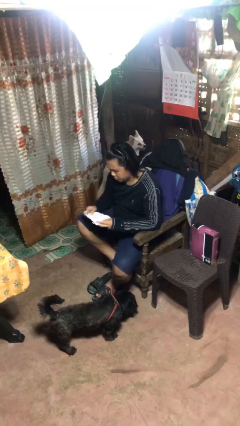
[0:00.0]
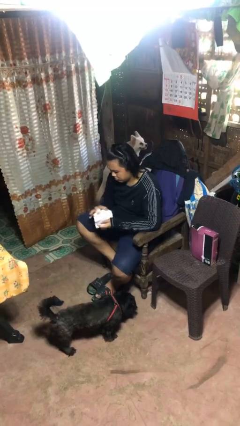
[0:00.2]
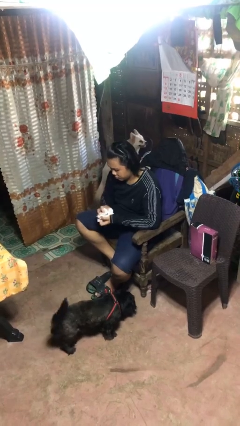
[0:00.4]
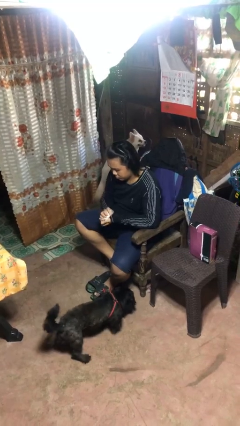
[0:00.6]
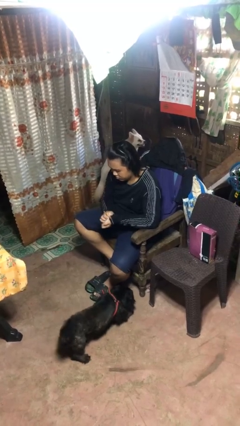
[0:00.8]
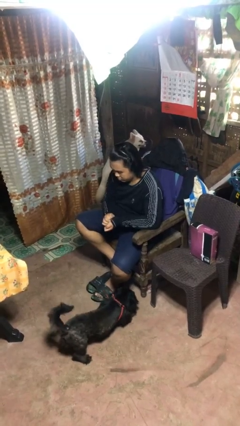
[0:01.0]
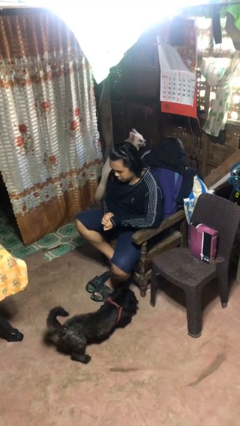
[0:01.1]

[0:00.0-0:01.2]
person crumples paper

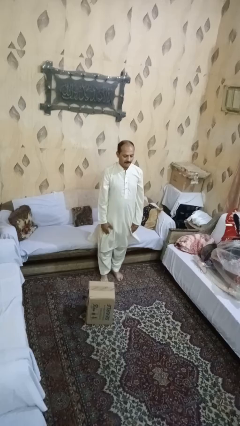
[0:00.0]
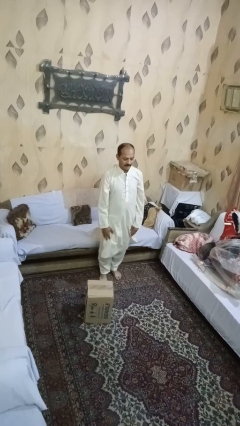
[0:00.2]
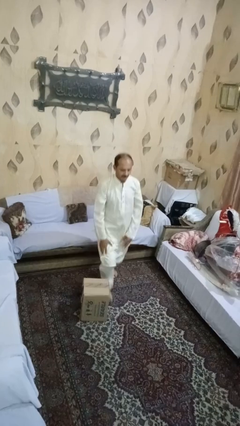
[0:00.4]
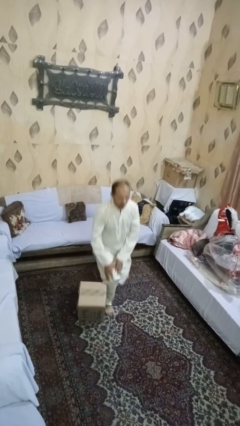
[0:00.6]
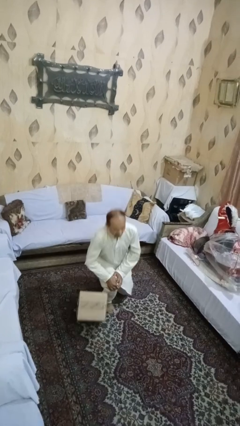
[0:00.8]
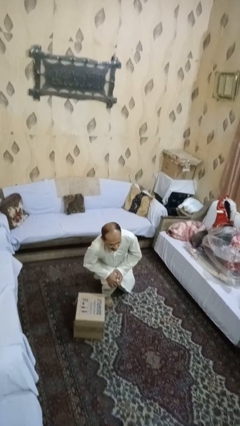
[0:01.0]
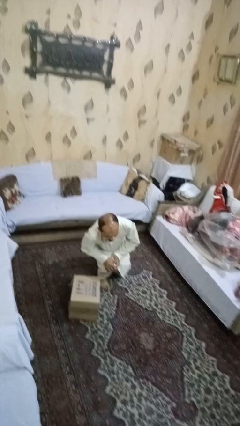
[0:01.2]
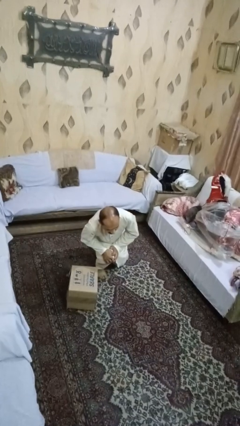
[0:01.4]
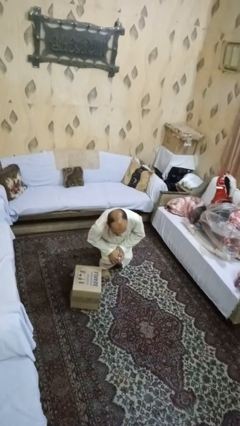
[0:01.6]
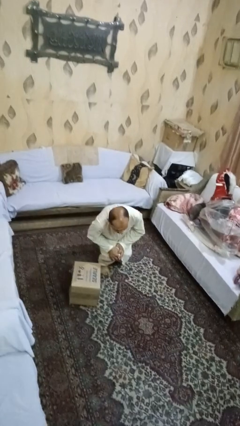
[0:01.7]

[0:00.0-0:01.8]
person trips on object on floor

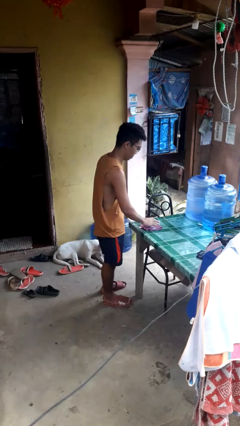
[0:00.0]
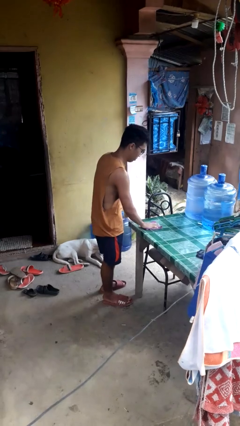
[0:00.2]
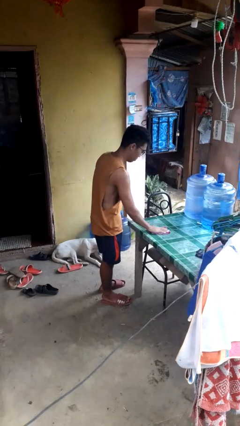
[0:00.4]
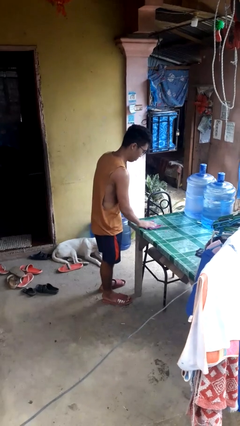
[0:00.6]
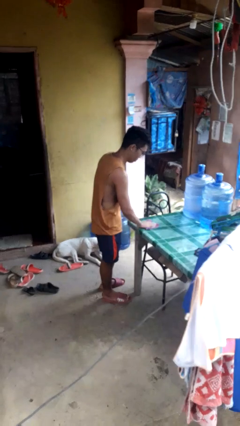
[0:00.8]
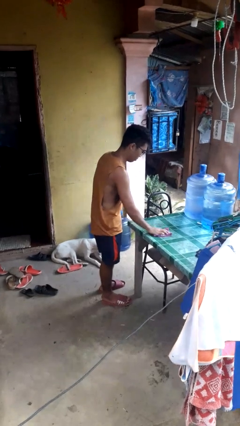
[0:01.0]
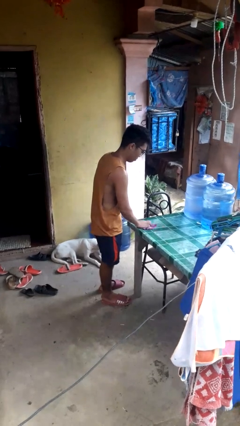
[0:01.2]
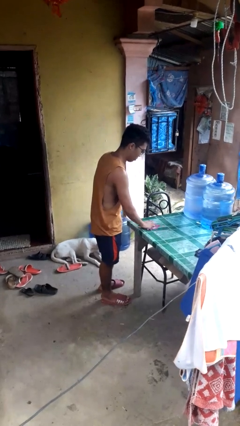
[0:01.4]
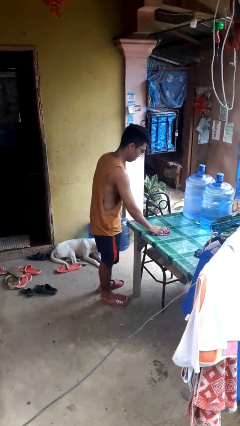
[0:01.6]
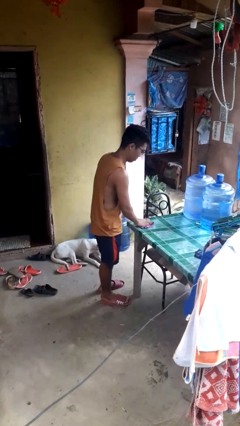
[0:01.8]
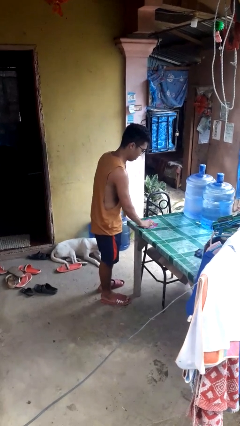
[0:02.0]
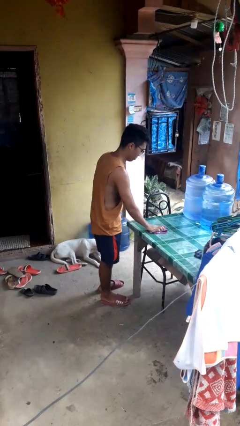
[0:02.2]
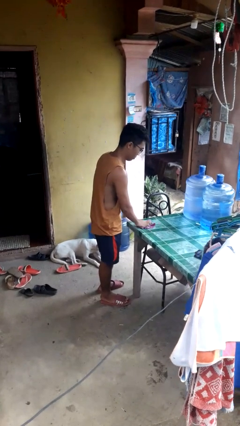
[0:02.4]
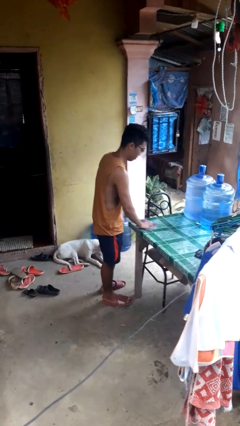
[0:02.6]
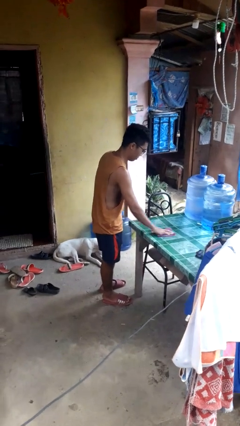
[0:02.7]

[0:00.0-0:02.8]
person cleans table with rag

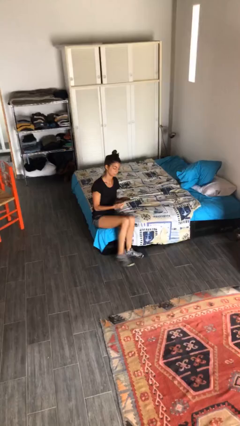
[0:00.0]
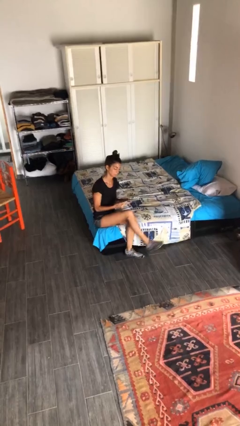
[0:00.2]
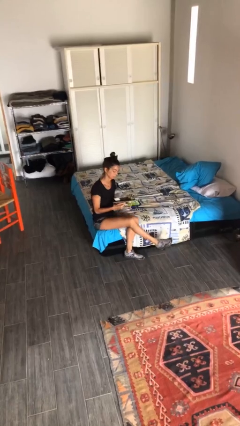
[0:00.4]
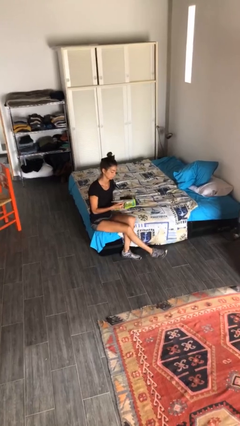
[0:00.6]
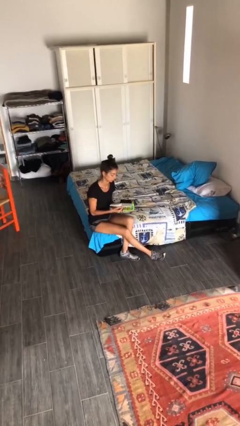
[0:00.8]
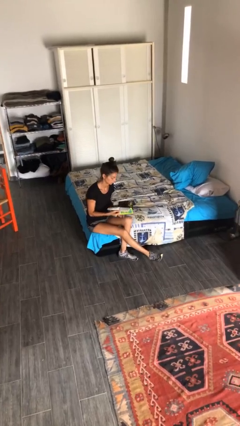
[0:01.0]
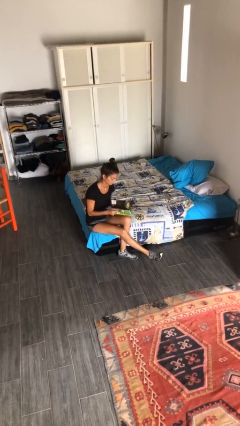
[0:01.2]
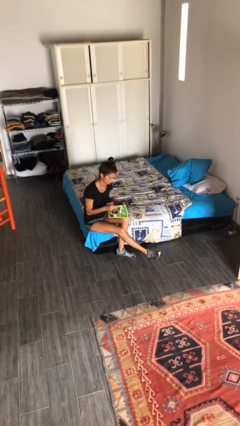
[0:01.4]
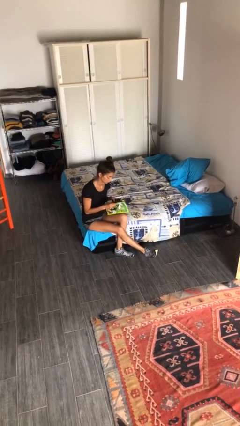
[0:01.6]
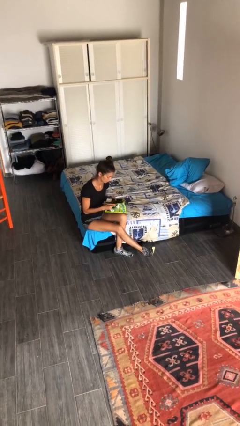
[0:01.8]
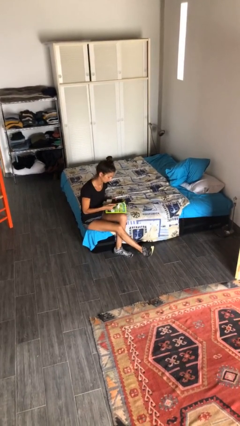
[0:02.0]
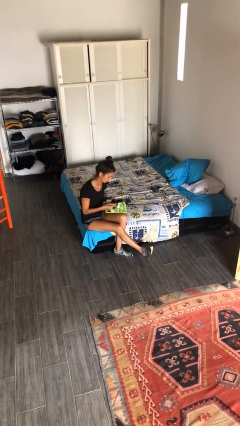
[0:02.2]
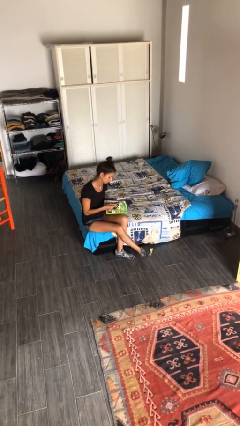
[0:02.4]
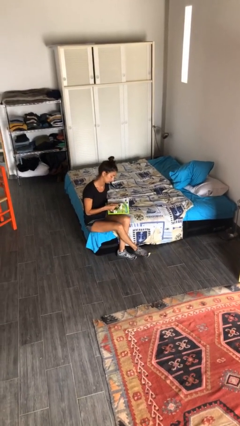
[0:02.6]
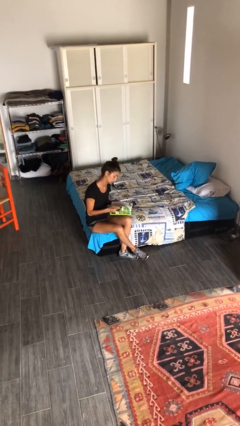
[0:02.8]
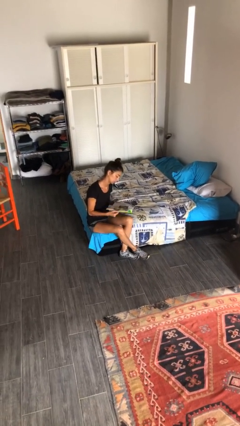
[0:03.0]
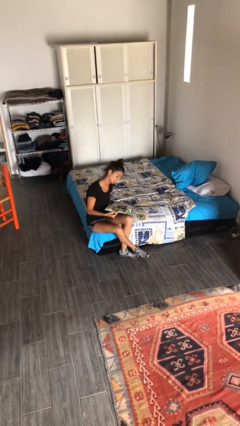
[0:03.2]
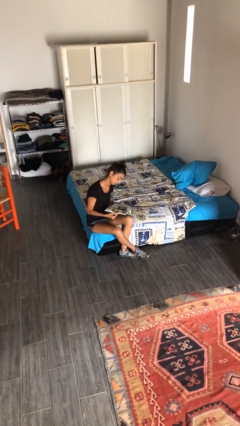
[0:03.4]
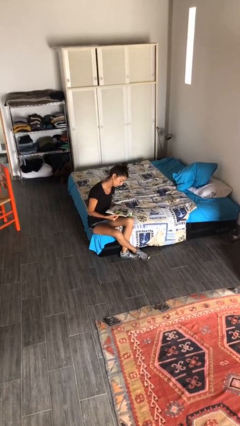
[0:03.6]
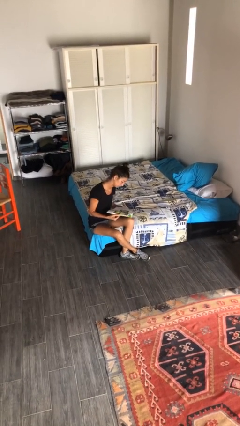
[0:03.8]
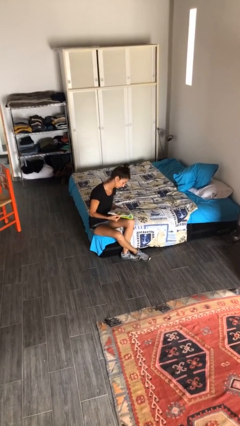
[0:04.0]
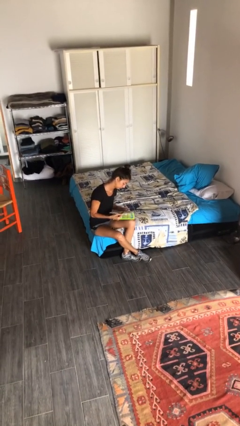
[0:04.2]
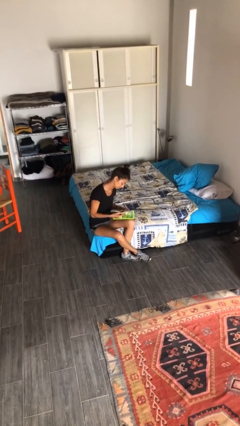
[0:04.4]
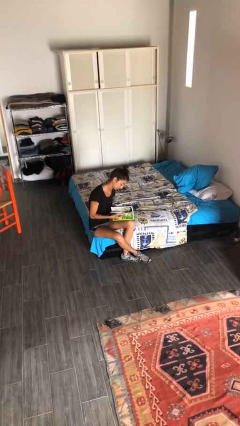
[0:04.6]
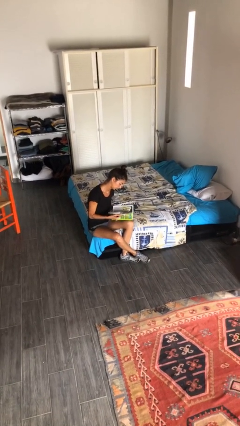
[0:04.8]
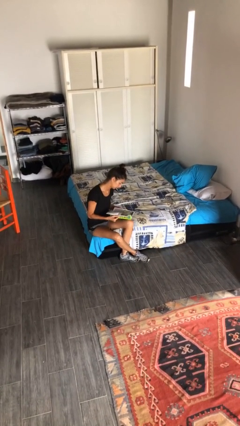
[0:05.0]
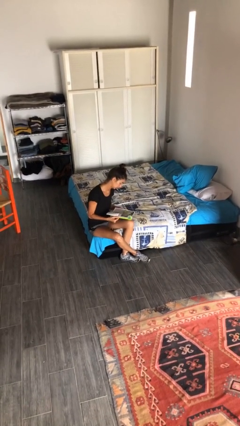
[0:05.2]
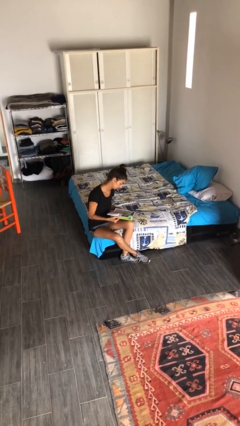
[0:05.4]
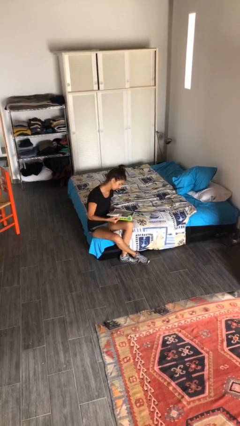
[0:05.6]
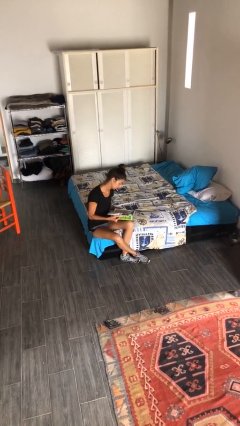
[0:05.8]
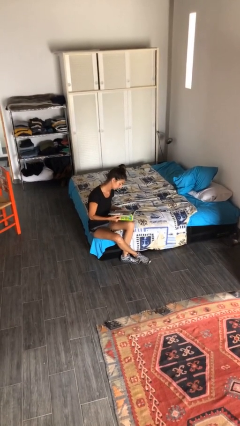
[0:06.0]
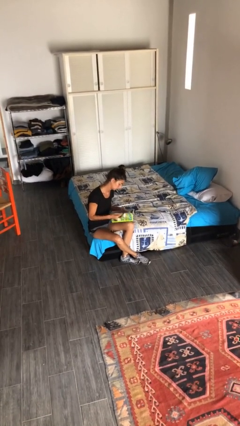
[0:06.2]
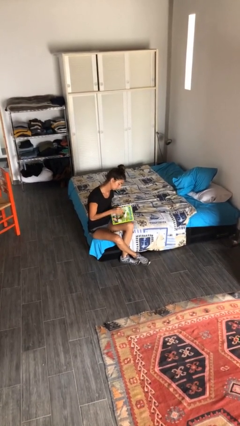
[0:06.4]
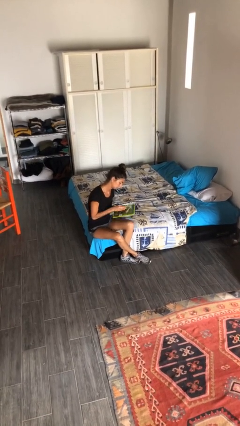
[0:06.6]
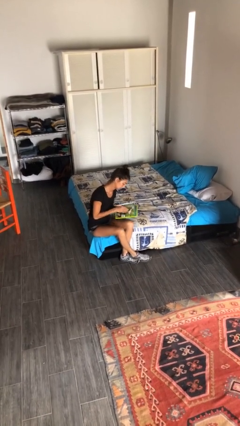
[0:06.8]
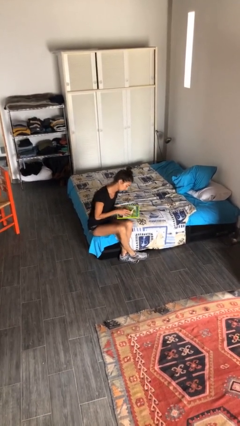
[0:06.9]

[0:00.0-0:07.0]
person reads magazine

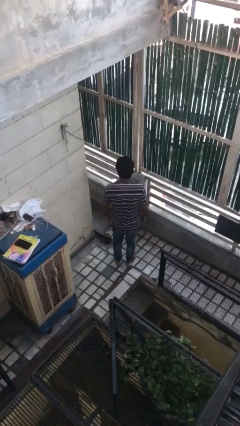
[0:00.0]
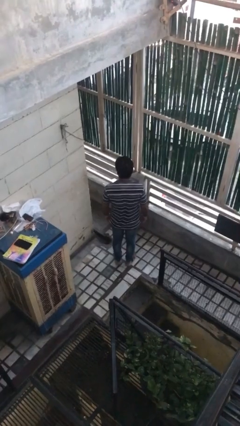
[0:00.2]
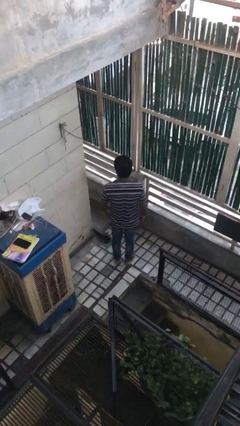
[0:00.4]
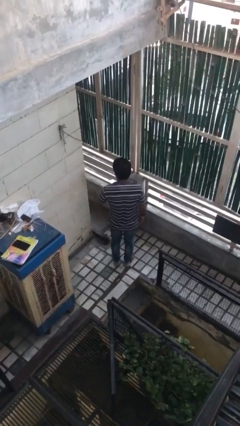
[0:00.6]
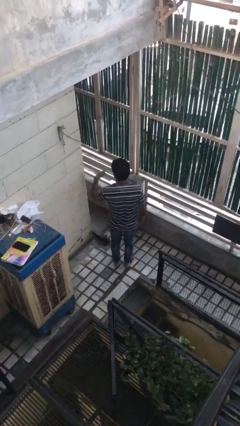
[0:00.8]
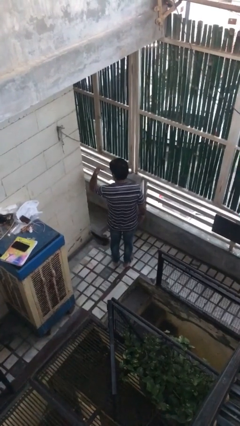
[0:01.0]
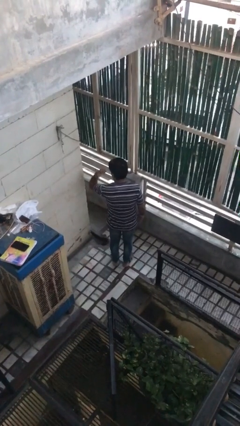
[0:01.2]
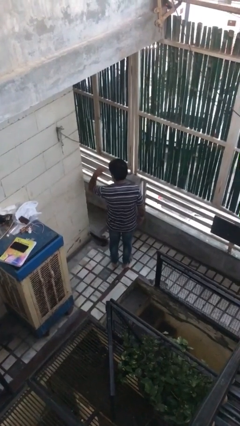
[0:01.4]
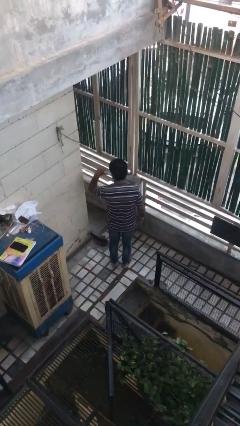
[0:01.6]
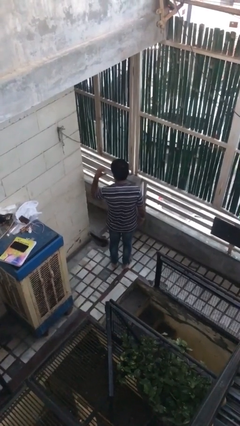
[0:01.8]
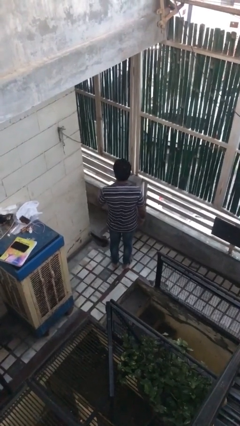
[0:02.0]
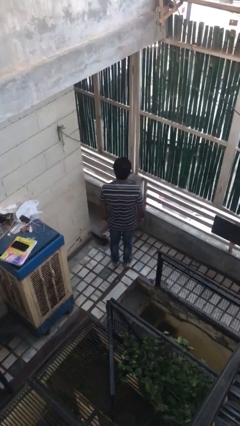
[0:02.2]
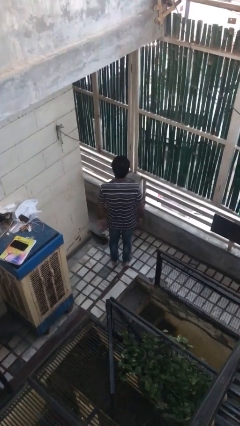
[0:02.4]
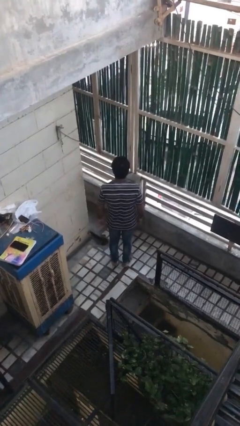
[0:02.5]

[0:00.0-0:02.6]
person gestures behind me

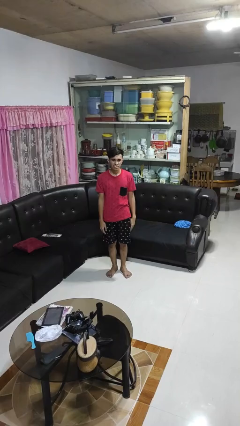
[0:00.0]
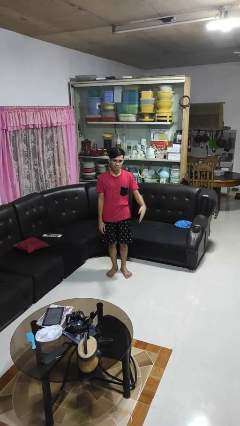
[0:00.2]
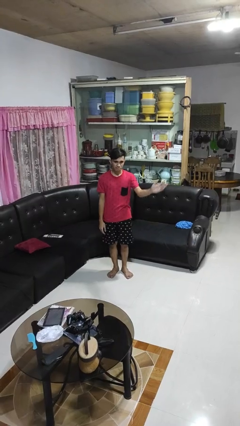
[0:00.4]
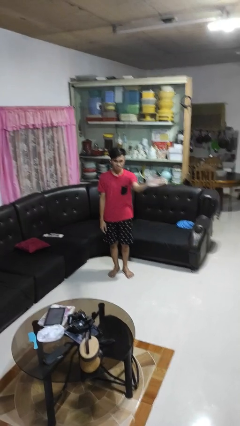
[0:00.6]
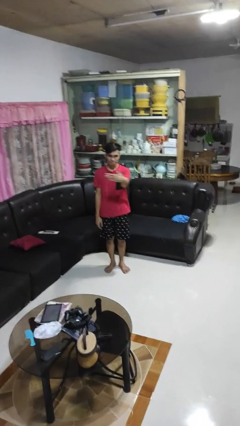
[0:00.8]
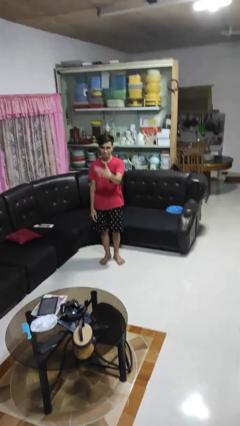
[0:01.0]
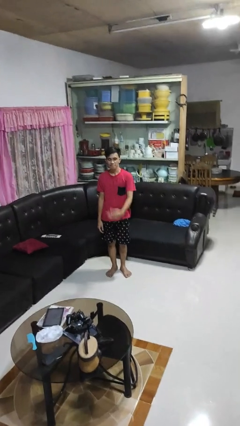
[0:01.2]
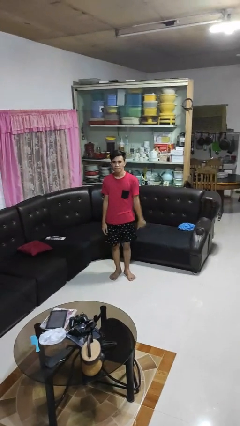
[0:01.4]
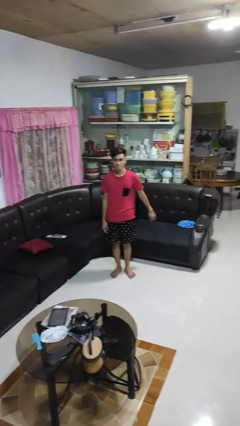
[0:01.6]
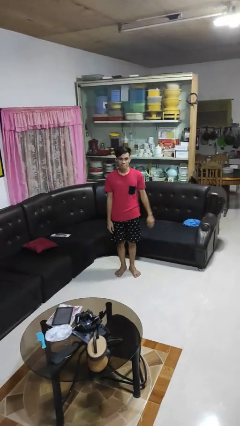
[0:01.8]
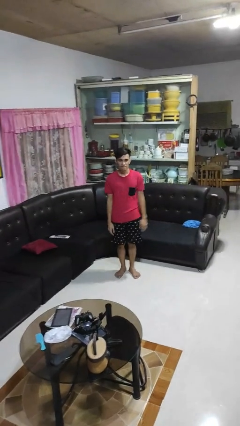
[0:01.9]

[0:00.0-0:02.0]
person gestures swipe right
